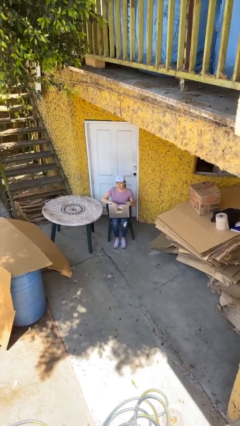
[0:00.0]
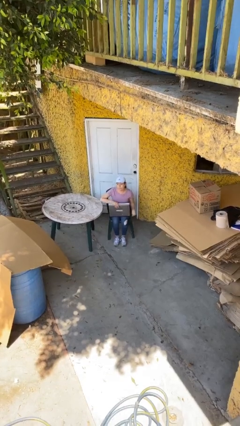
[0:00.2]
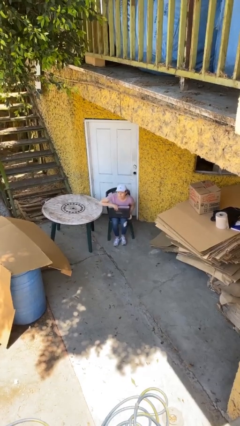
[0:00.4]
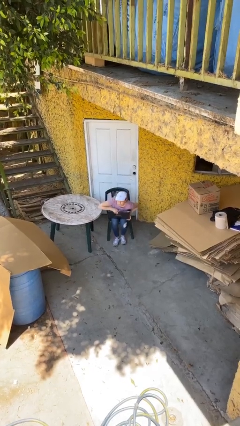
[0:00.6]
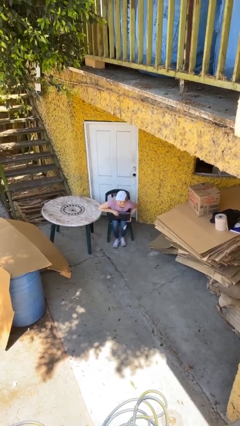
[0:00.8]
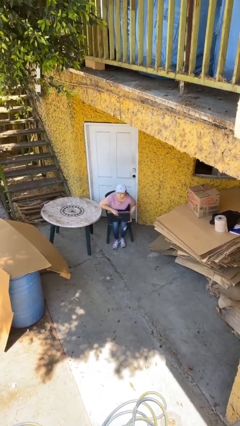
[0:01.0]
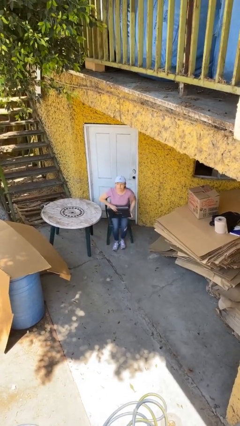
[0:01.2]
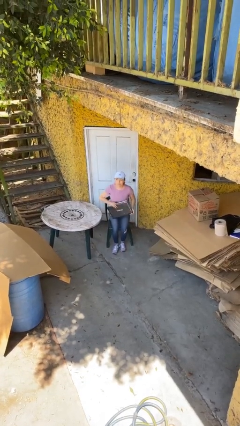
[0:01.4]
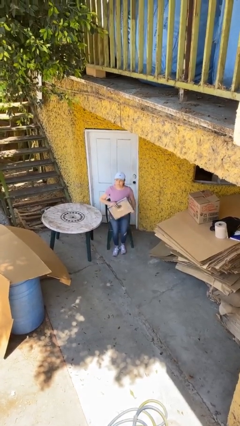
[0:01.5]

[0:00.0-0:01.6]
person stands up

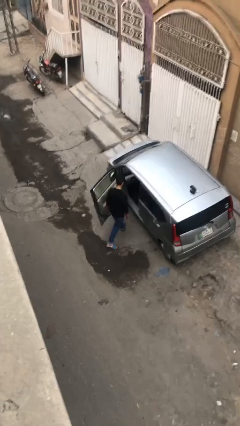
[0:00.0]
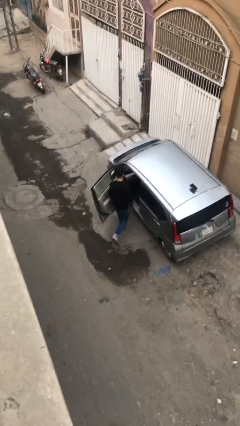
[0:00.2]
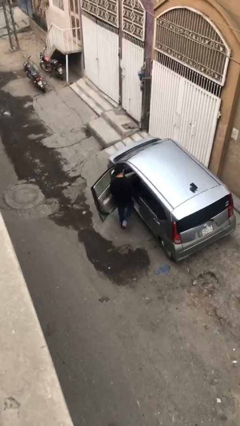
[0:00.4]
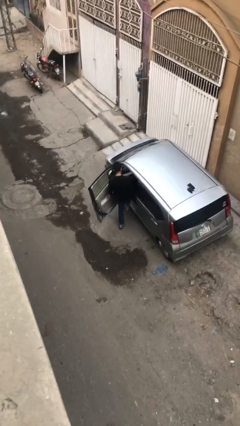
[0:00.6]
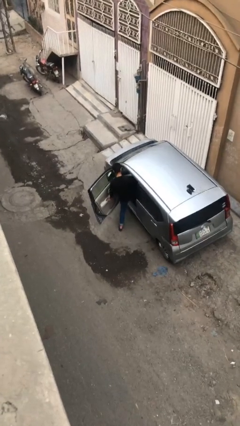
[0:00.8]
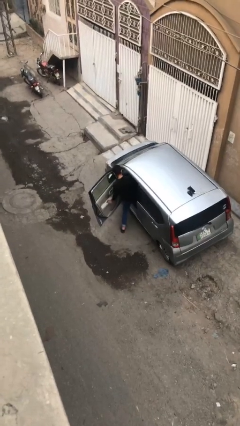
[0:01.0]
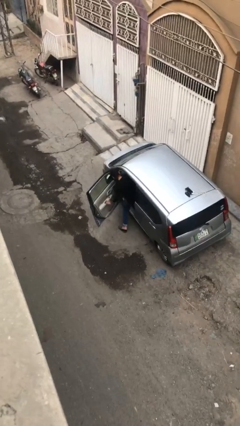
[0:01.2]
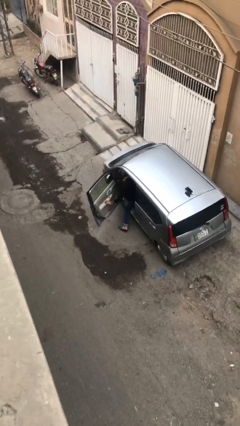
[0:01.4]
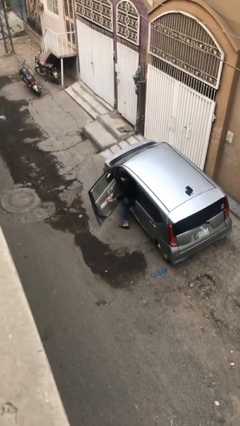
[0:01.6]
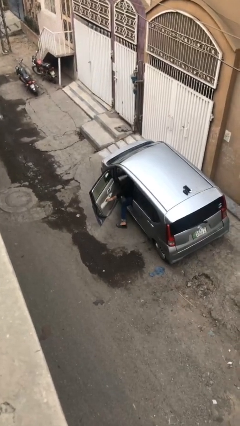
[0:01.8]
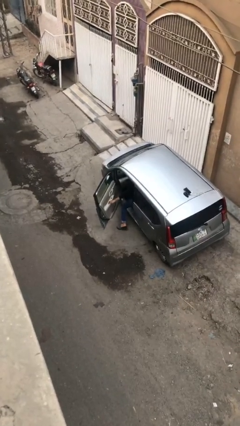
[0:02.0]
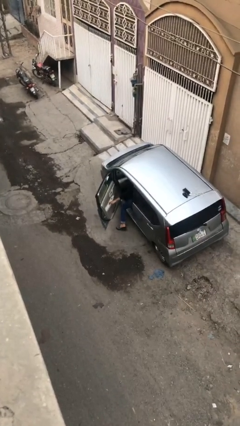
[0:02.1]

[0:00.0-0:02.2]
person enters car

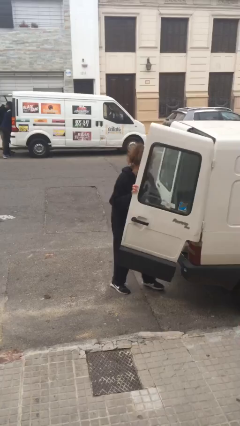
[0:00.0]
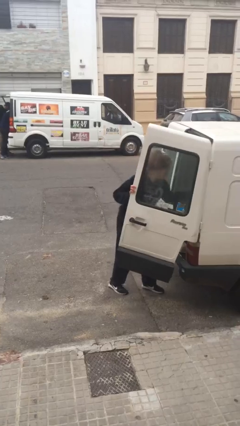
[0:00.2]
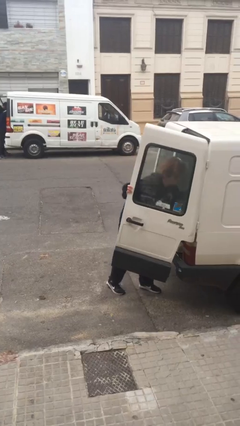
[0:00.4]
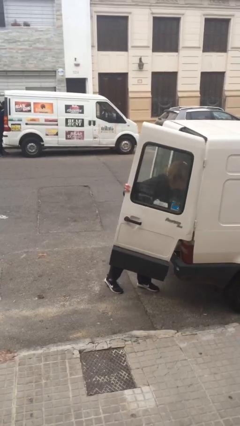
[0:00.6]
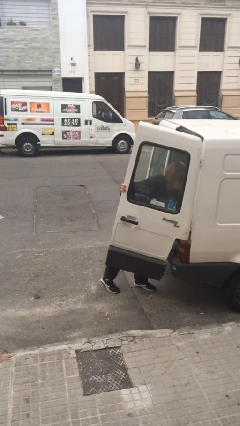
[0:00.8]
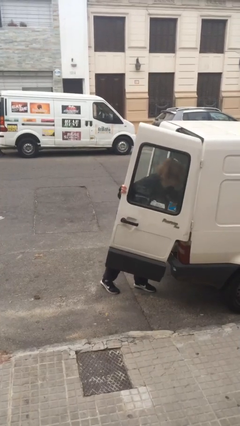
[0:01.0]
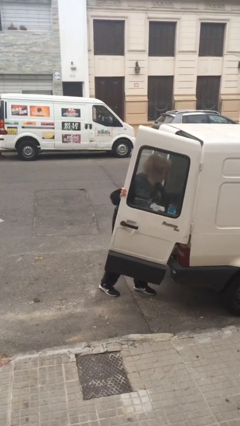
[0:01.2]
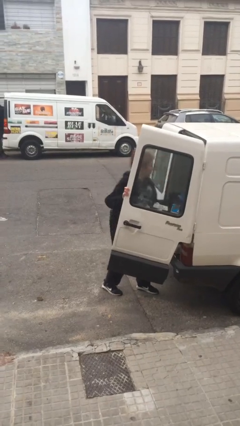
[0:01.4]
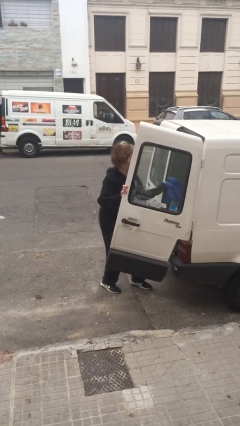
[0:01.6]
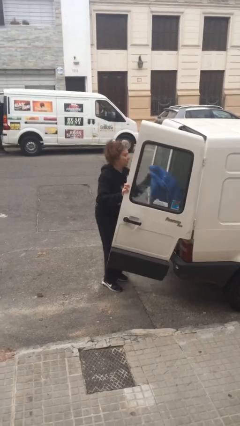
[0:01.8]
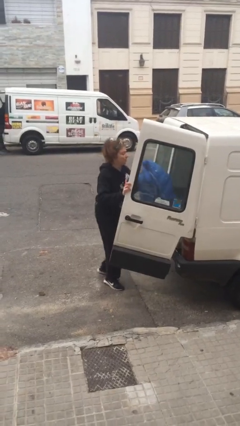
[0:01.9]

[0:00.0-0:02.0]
person unloads car

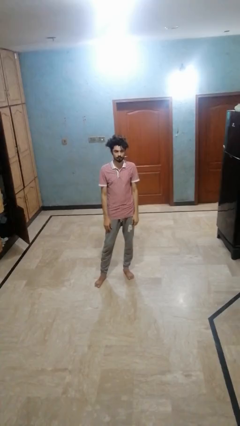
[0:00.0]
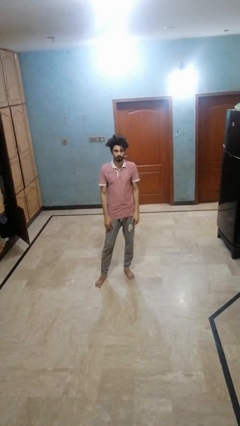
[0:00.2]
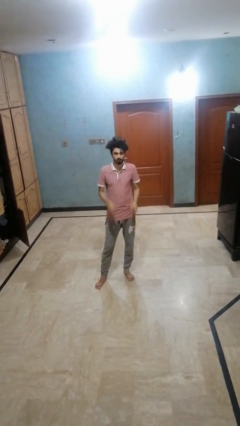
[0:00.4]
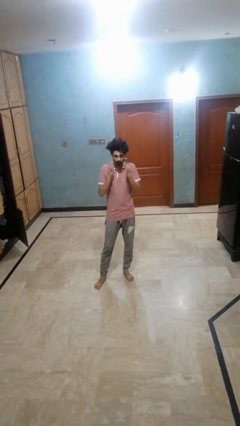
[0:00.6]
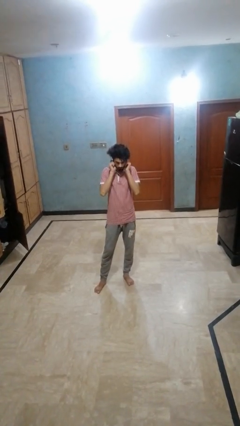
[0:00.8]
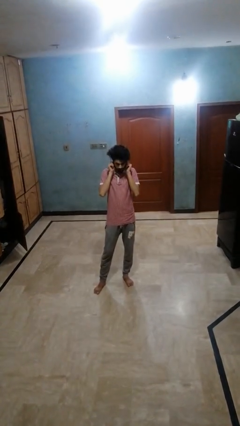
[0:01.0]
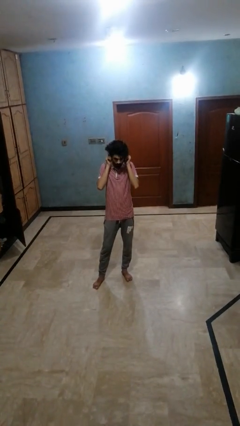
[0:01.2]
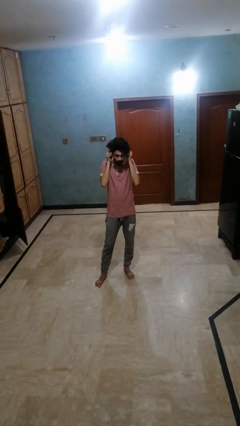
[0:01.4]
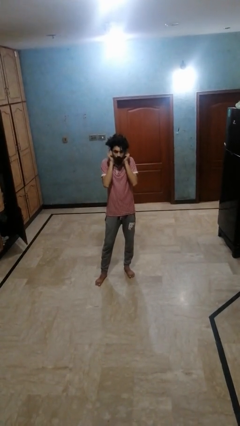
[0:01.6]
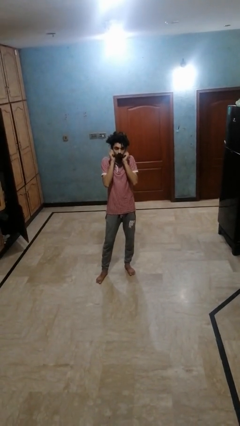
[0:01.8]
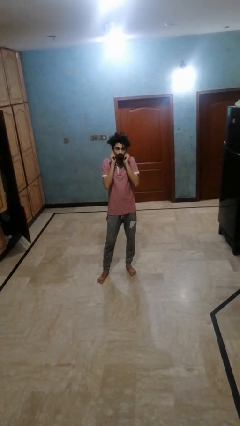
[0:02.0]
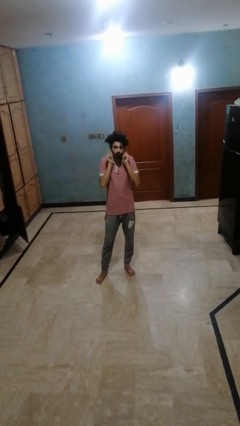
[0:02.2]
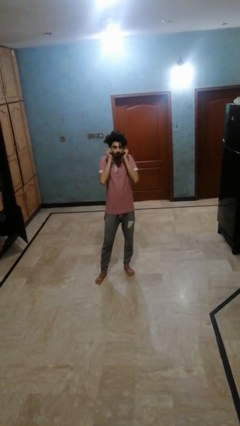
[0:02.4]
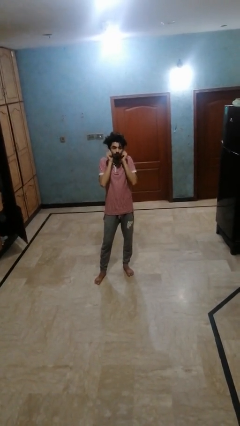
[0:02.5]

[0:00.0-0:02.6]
person touches earlobe

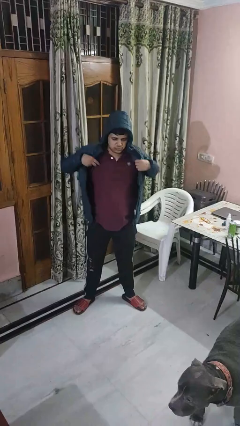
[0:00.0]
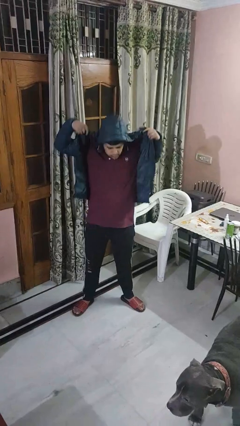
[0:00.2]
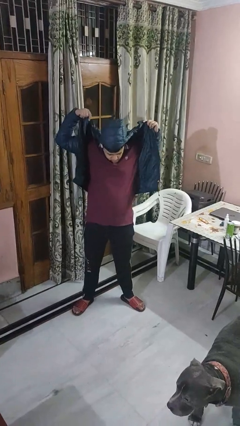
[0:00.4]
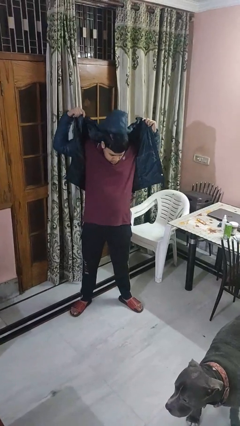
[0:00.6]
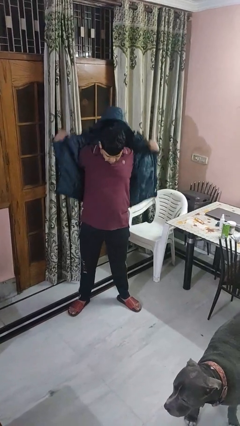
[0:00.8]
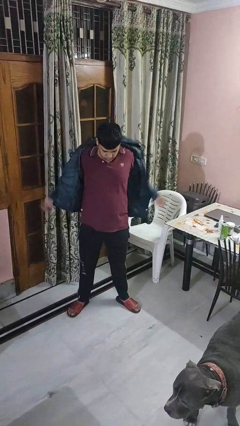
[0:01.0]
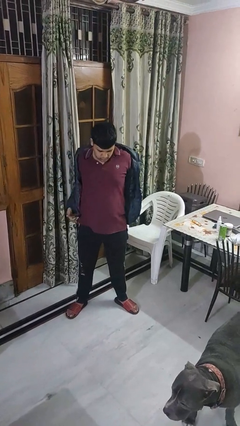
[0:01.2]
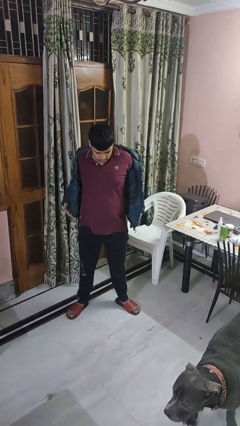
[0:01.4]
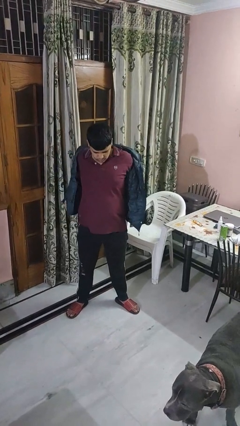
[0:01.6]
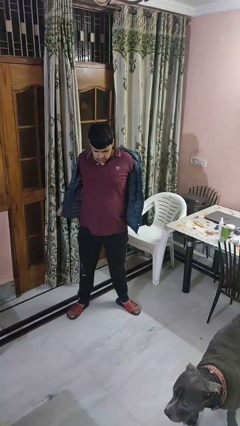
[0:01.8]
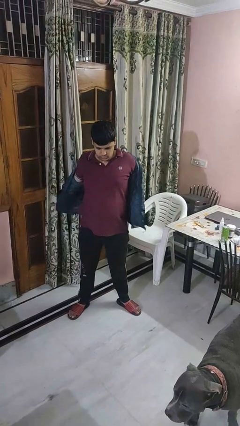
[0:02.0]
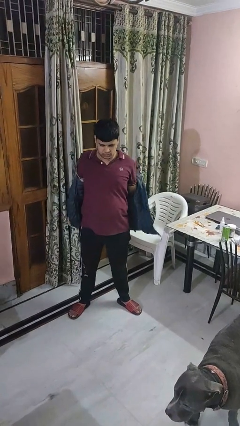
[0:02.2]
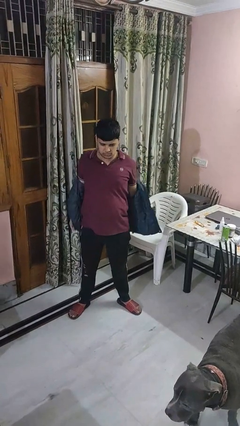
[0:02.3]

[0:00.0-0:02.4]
person takes off hoodie

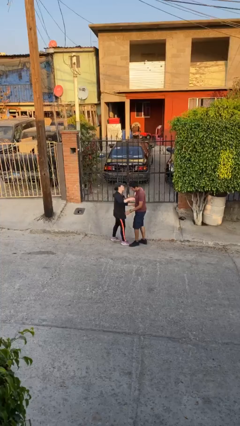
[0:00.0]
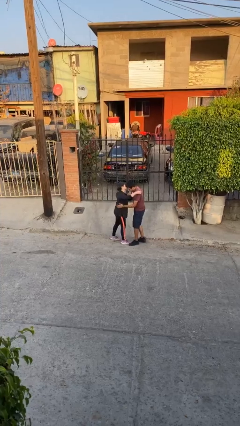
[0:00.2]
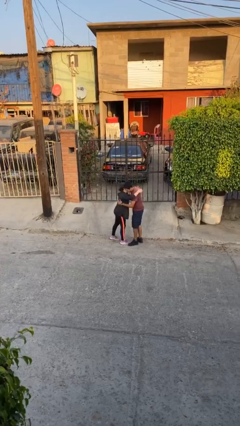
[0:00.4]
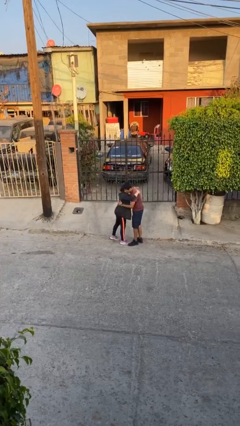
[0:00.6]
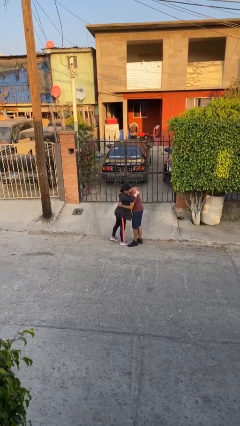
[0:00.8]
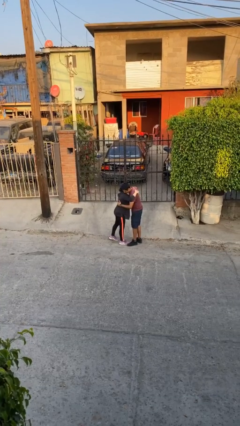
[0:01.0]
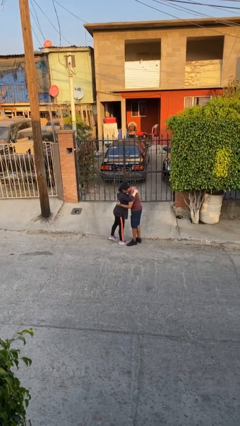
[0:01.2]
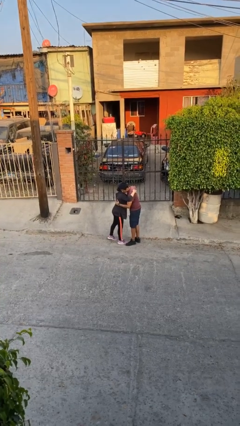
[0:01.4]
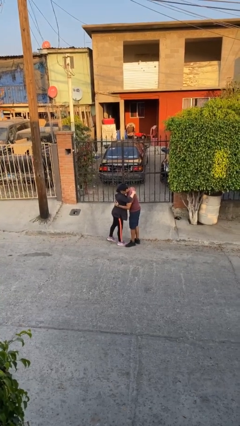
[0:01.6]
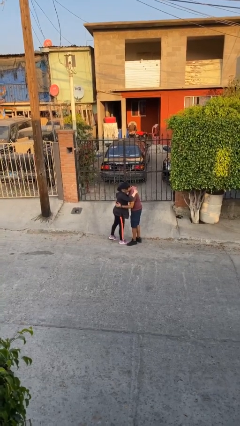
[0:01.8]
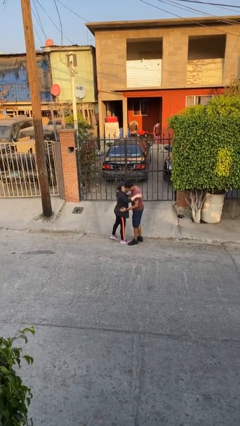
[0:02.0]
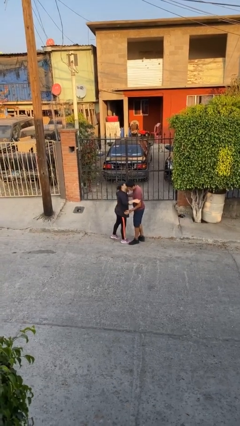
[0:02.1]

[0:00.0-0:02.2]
person embraces person

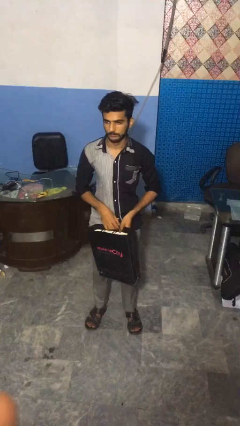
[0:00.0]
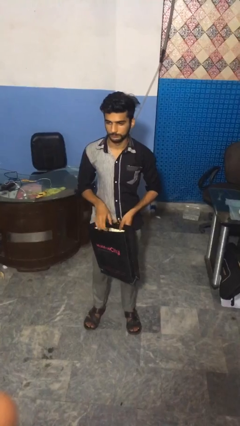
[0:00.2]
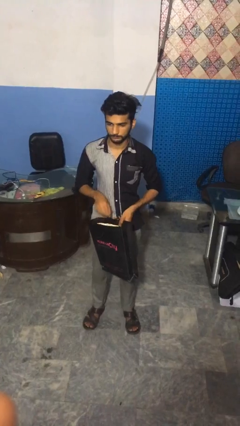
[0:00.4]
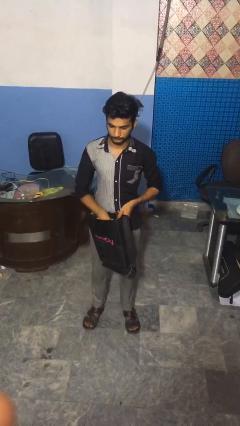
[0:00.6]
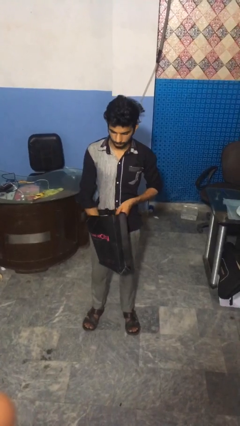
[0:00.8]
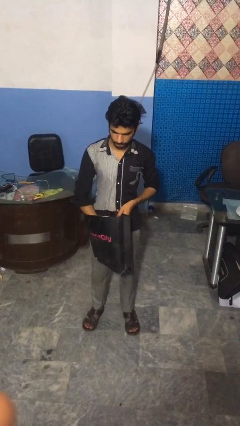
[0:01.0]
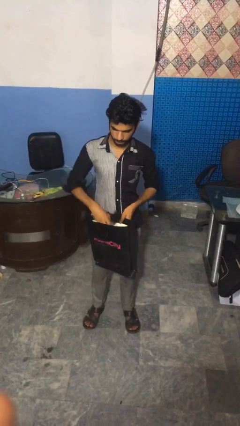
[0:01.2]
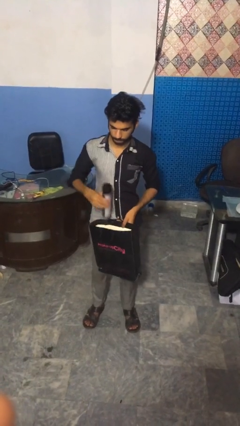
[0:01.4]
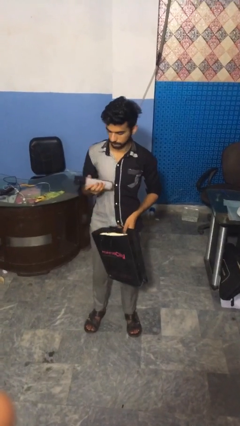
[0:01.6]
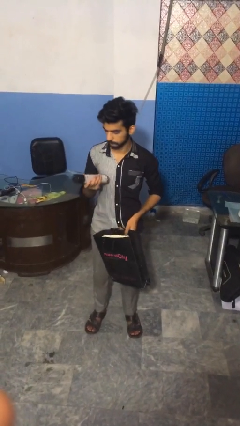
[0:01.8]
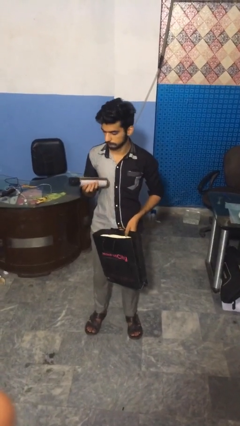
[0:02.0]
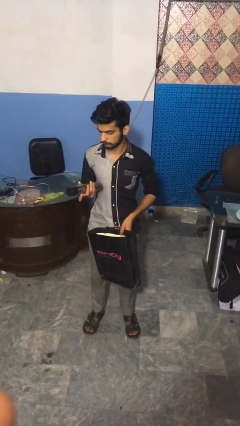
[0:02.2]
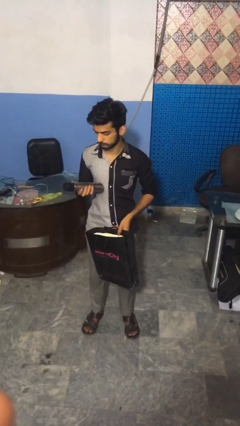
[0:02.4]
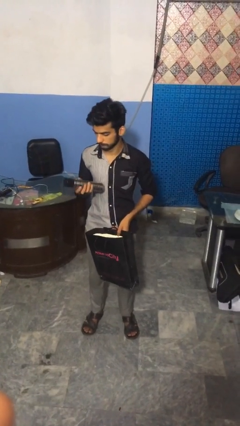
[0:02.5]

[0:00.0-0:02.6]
person takes object from bag

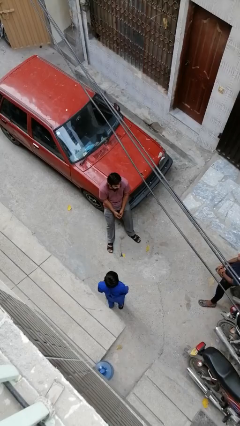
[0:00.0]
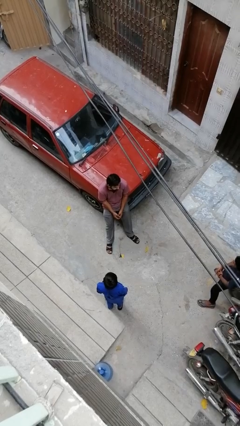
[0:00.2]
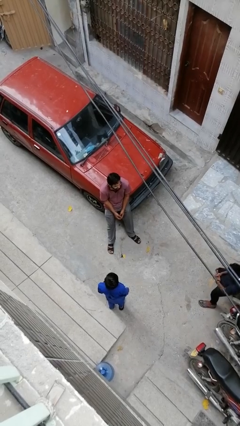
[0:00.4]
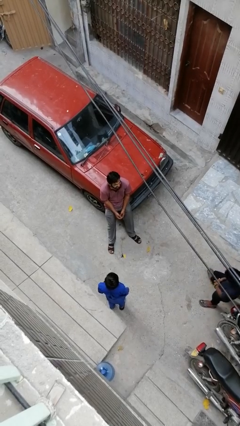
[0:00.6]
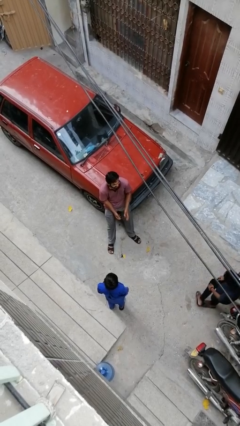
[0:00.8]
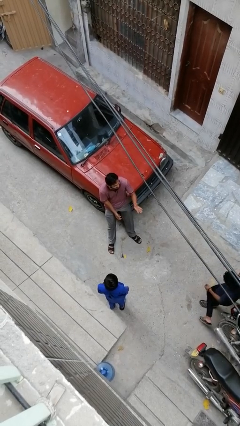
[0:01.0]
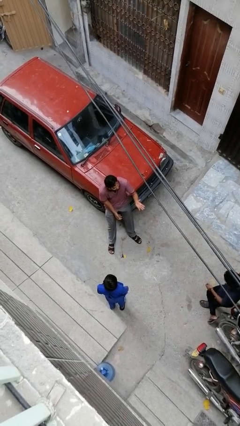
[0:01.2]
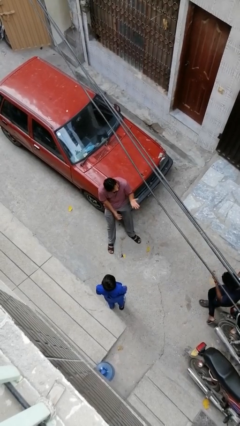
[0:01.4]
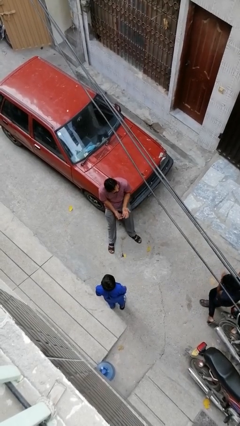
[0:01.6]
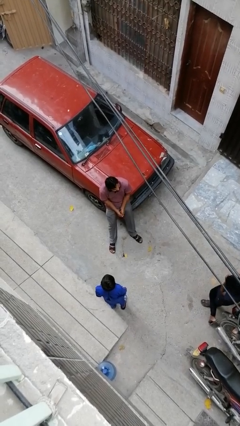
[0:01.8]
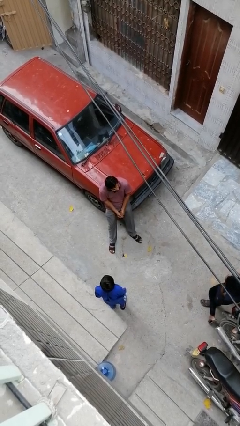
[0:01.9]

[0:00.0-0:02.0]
person laughs with person
